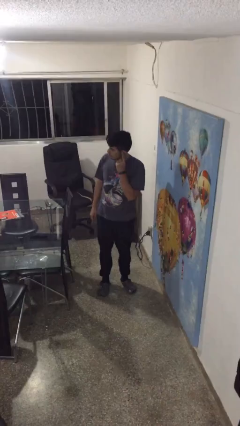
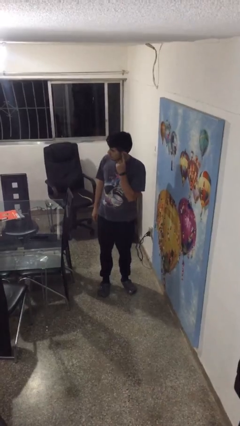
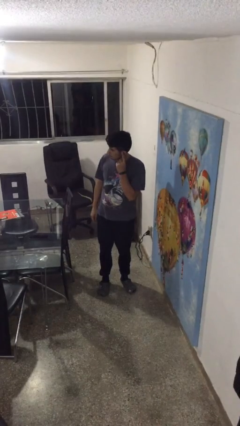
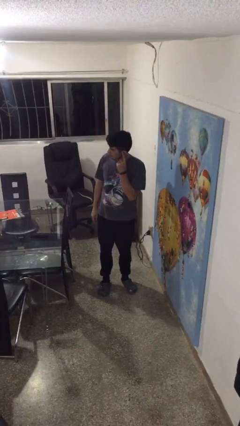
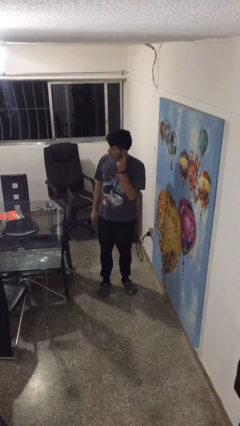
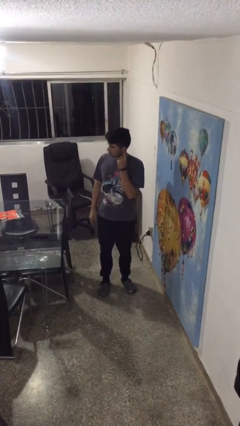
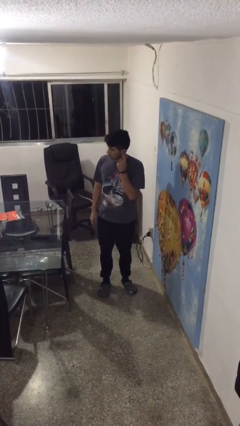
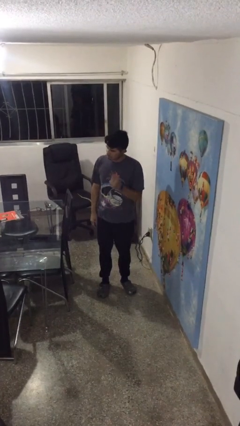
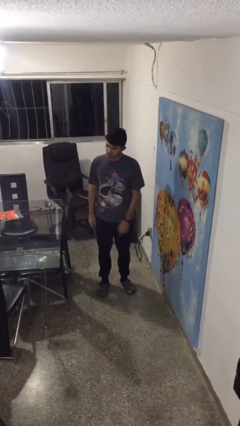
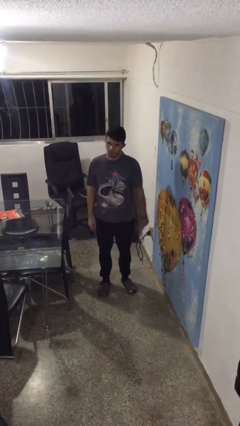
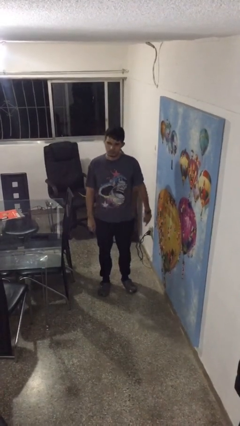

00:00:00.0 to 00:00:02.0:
person gestures listen closely

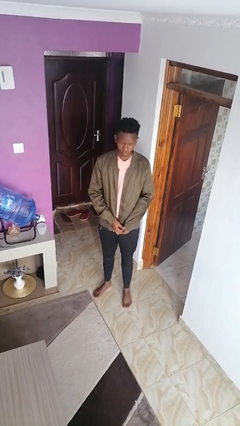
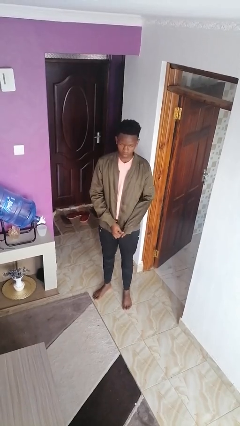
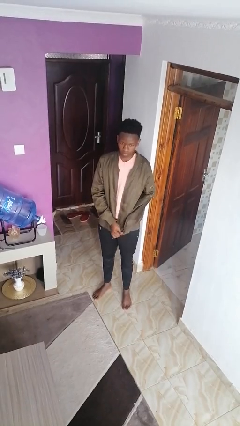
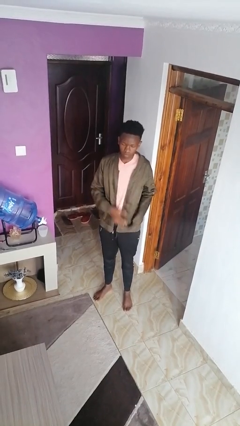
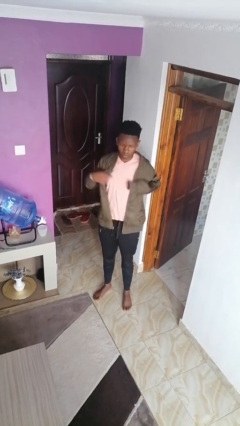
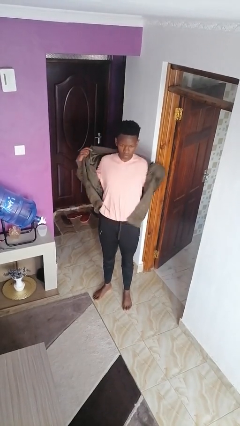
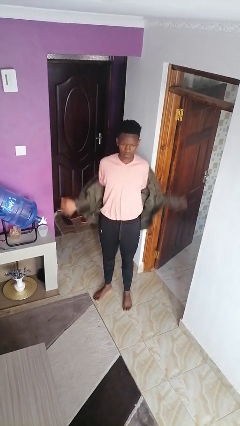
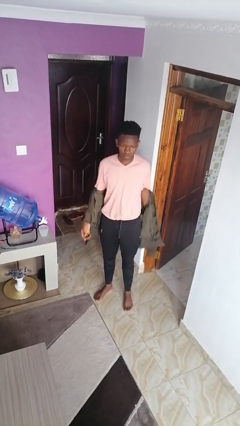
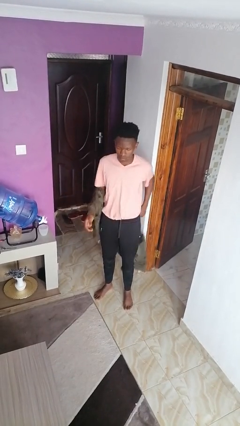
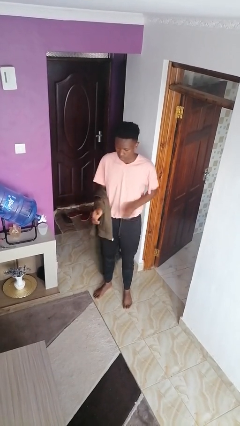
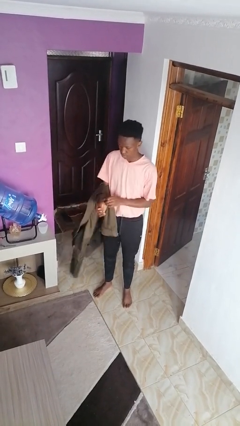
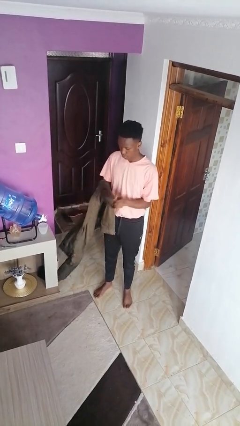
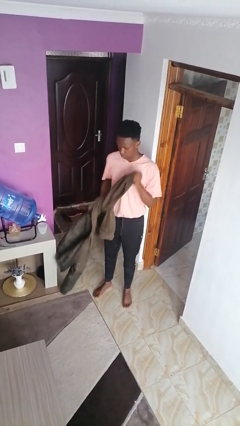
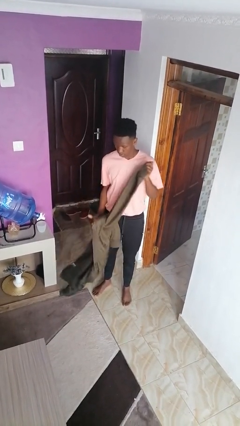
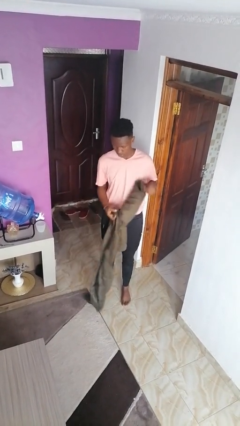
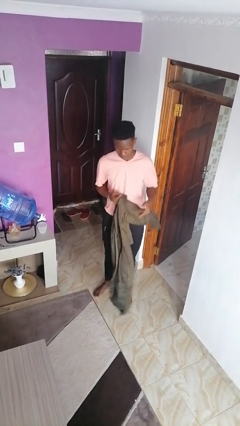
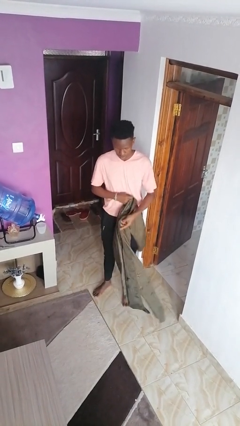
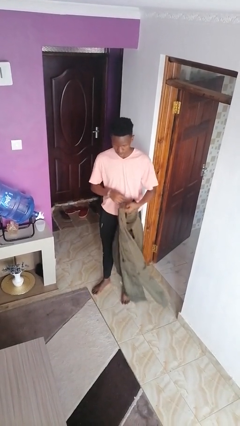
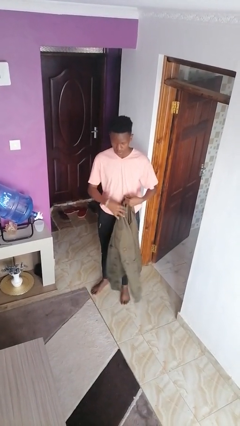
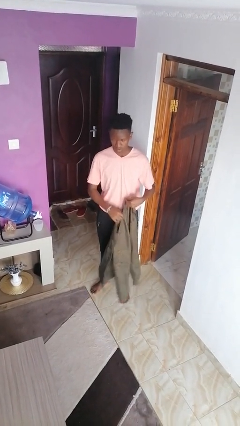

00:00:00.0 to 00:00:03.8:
person takes off jacket

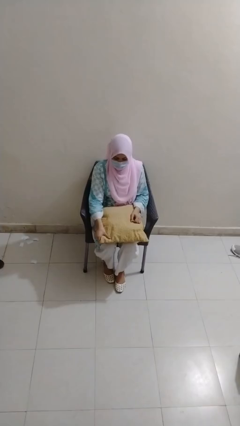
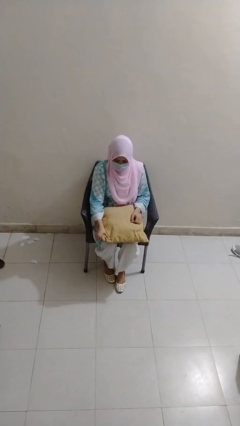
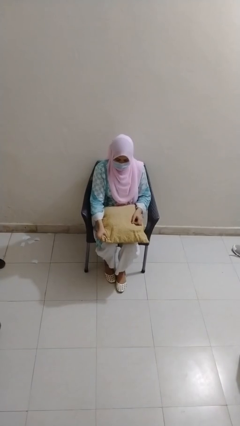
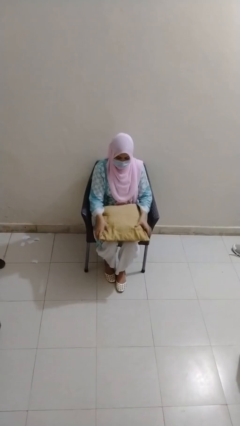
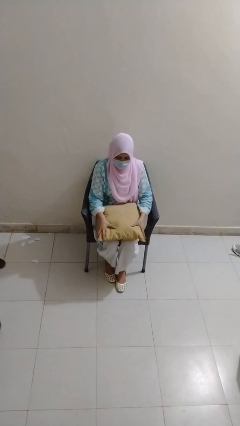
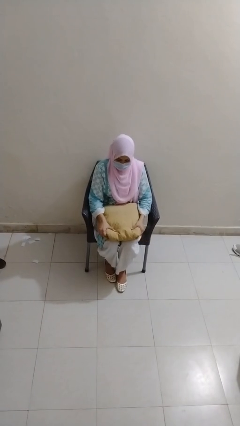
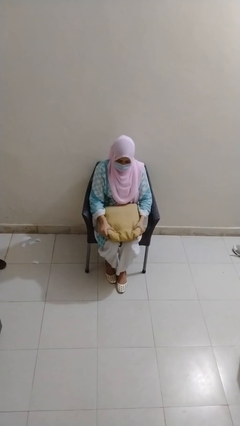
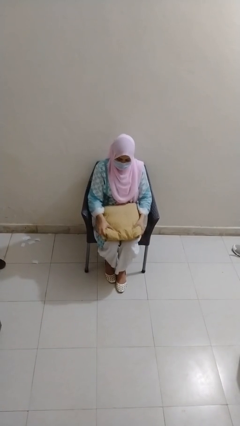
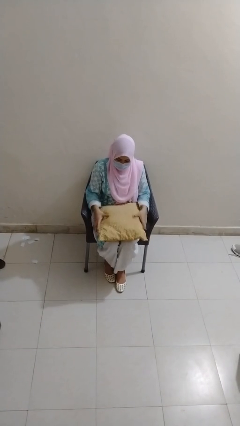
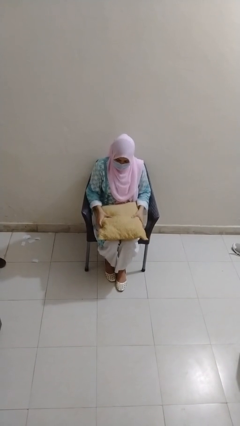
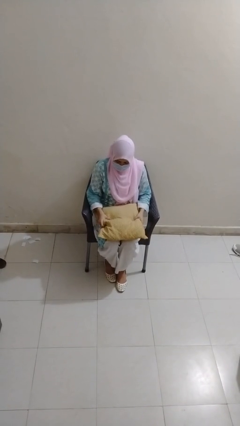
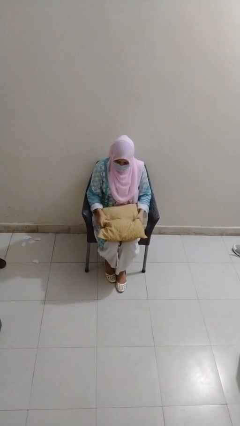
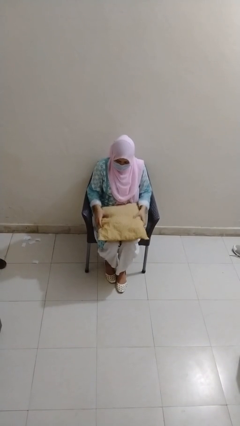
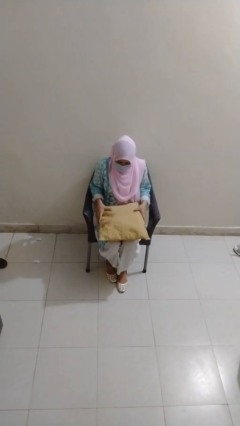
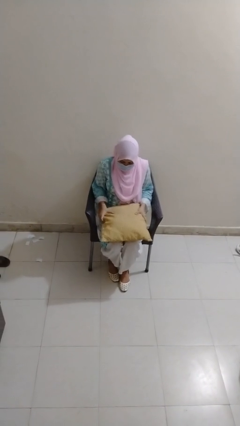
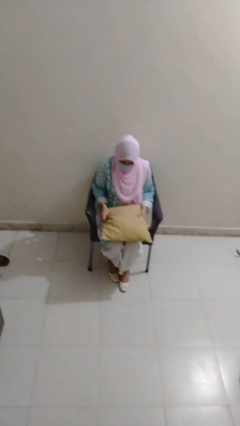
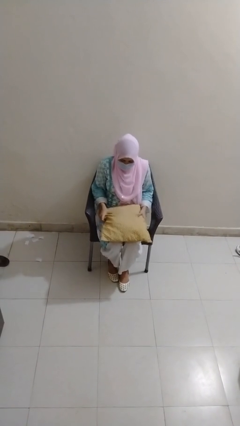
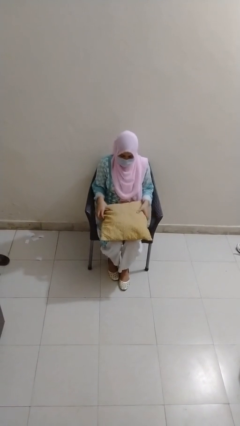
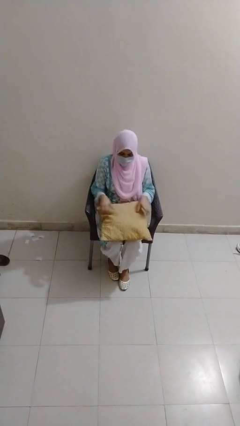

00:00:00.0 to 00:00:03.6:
person squeezes object

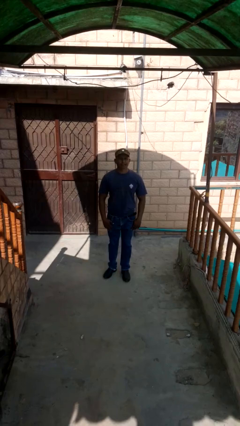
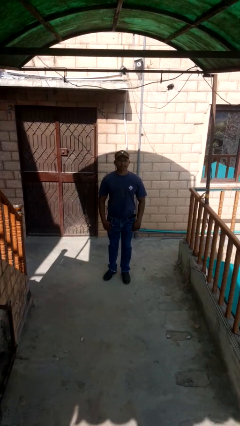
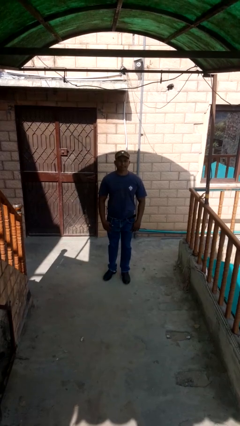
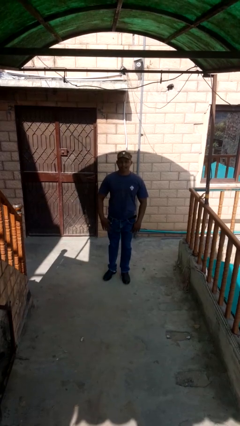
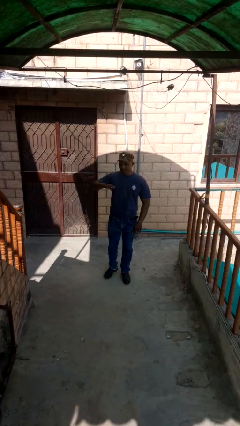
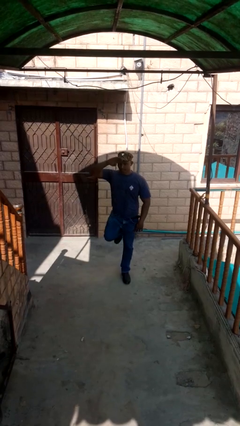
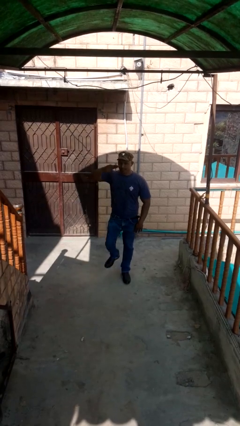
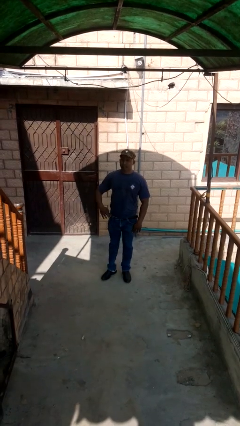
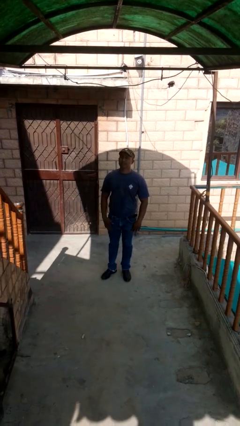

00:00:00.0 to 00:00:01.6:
person salutes

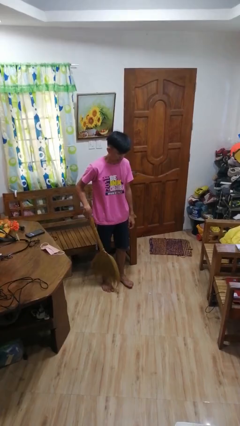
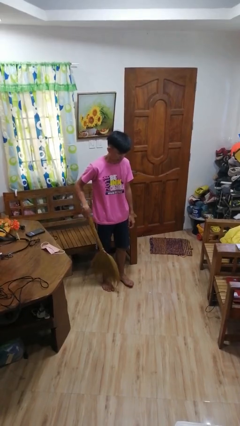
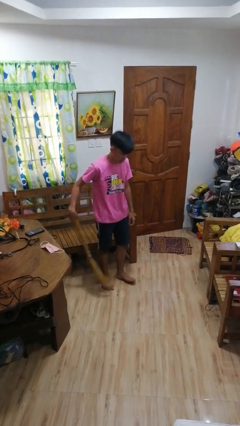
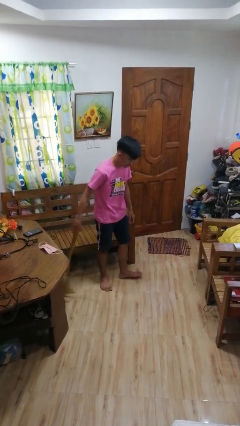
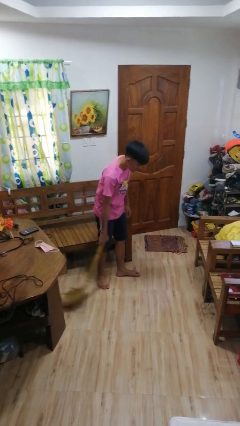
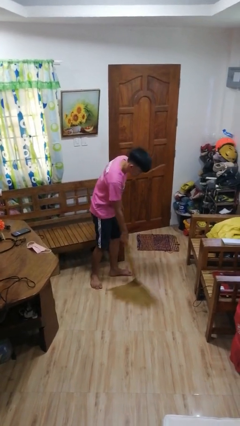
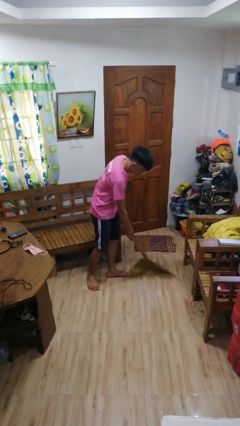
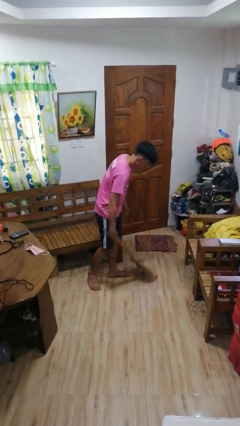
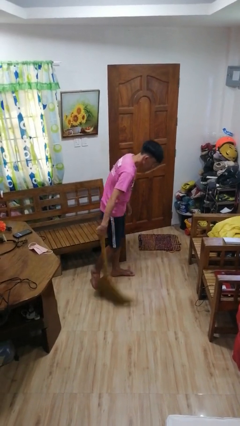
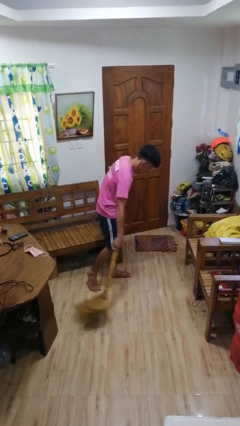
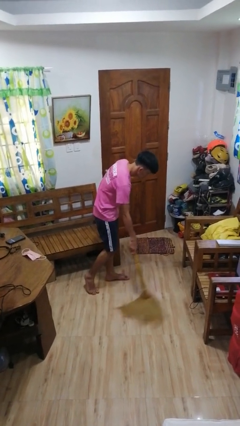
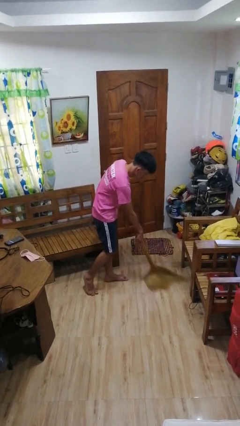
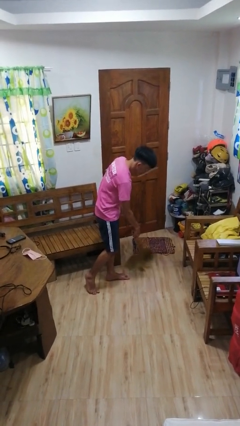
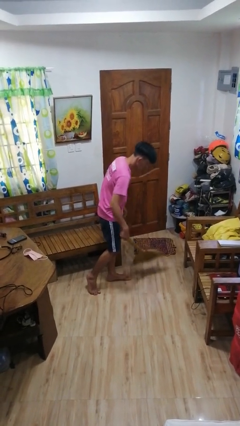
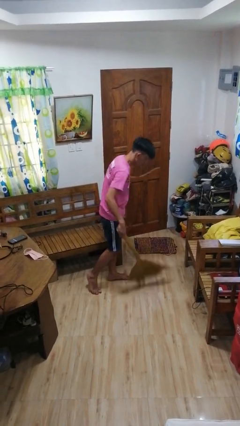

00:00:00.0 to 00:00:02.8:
person sweeps floor

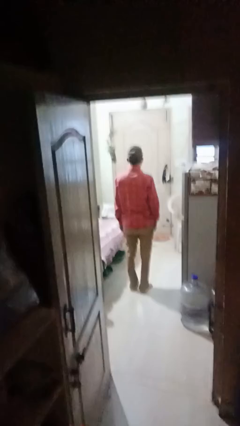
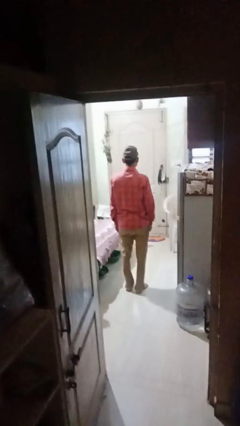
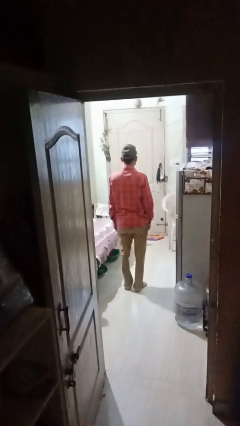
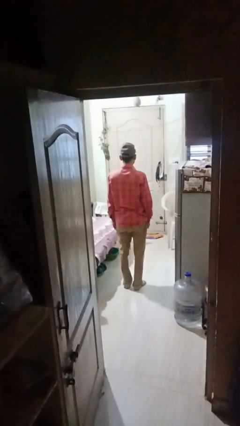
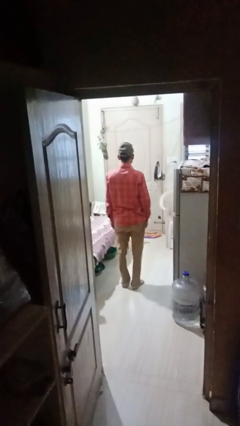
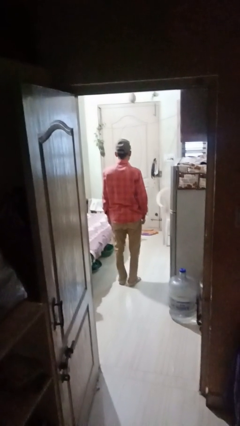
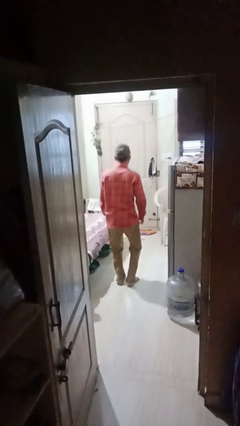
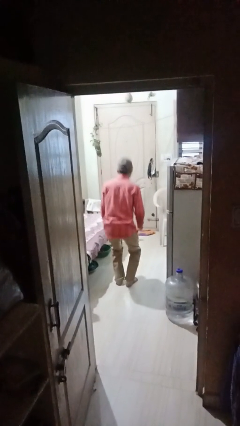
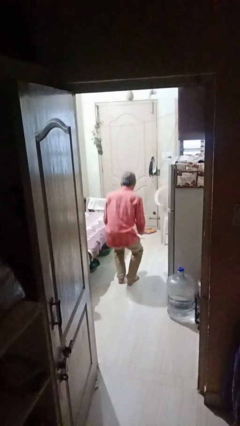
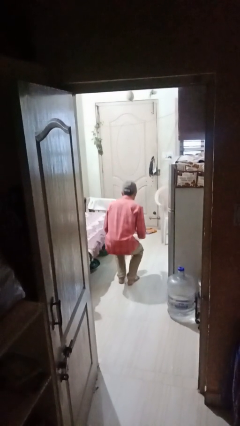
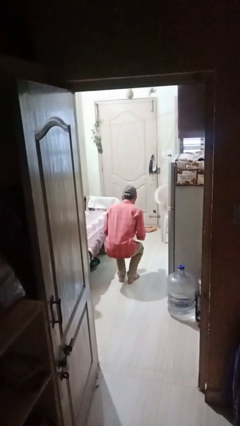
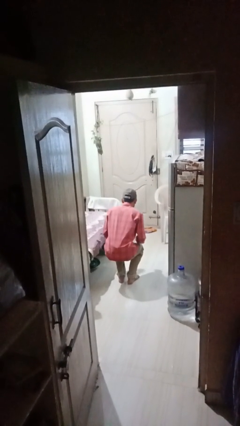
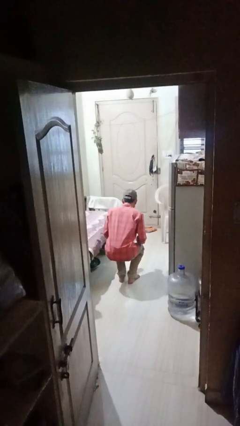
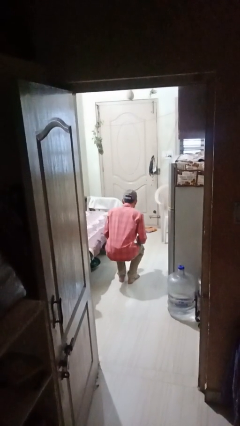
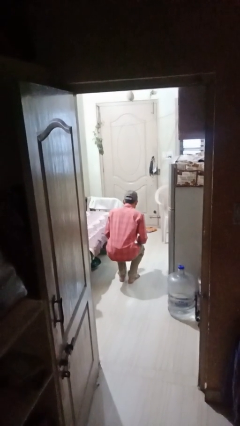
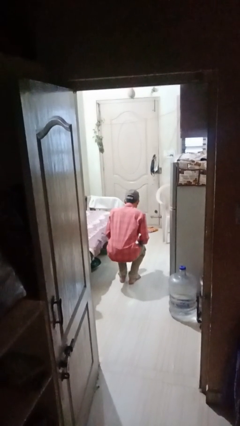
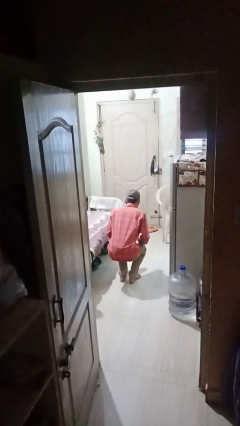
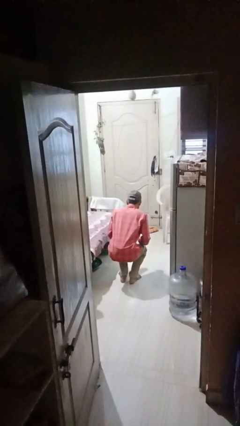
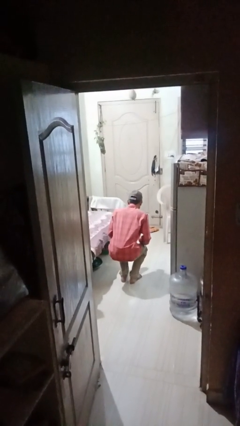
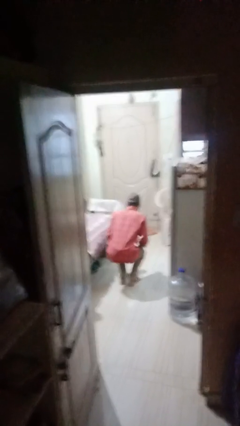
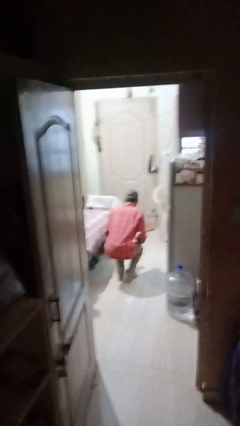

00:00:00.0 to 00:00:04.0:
person squats
